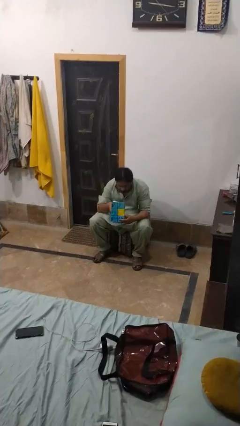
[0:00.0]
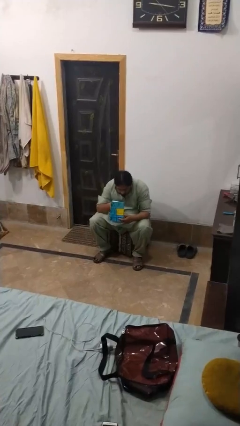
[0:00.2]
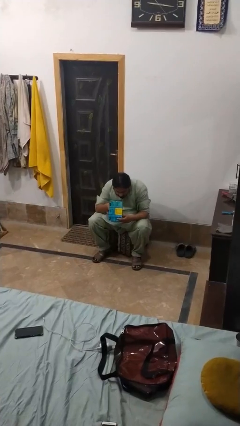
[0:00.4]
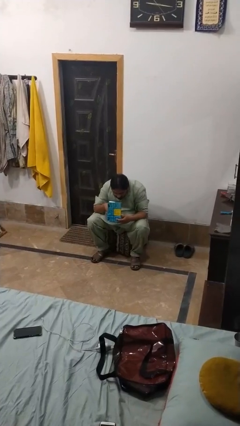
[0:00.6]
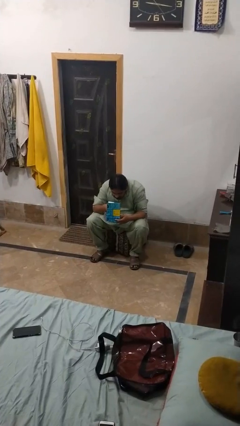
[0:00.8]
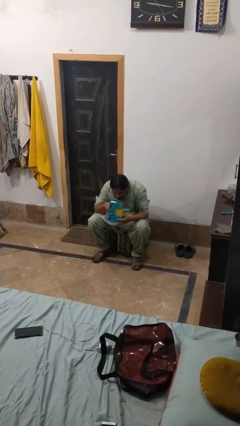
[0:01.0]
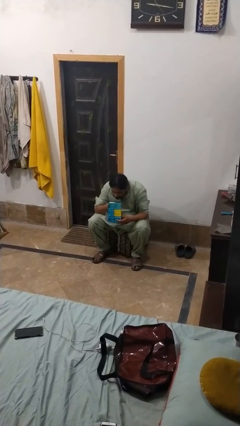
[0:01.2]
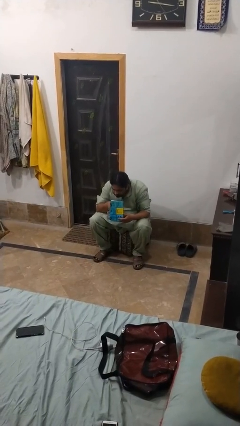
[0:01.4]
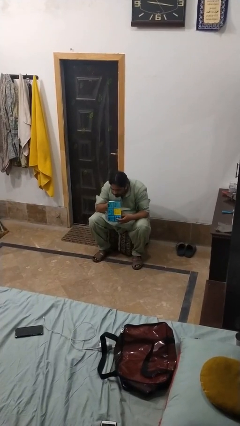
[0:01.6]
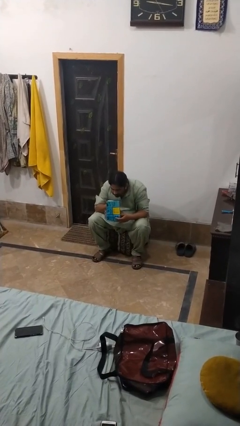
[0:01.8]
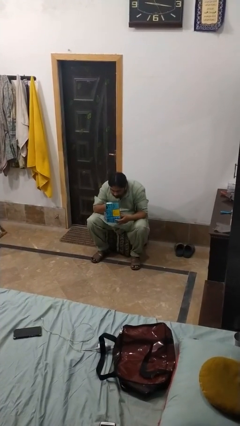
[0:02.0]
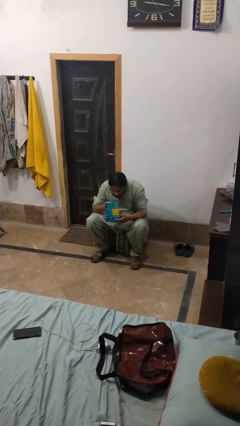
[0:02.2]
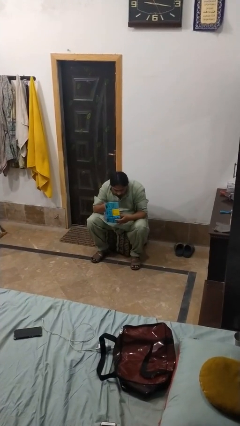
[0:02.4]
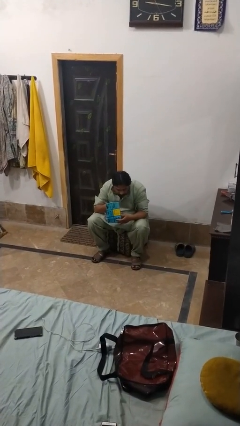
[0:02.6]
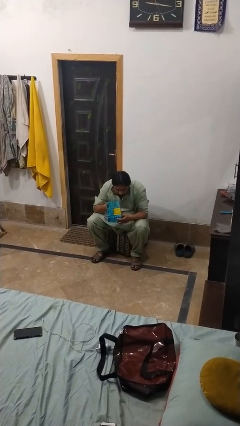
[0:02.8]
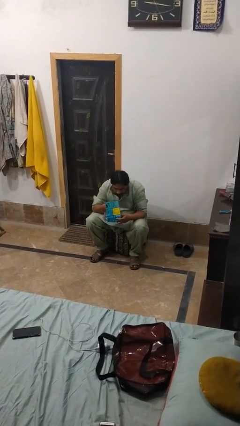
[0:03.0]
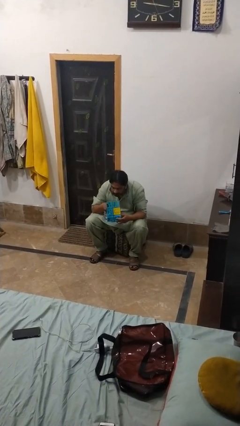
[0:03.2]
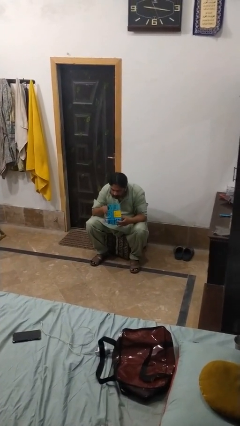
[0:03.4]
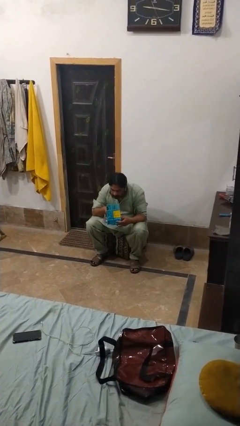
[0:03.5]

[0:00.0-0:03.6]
person searches jewelry box

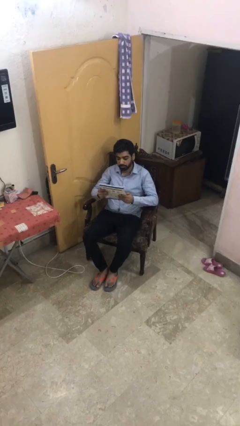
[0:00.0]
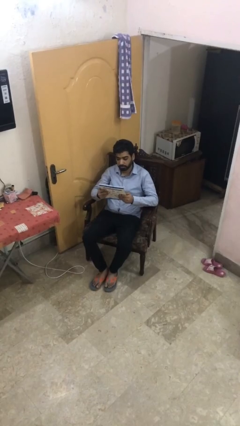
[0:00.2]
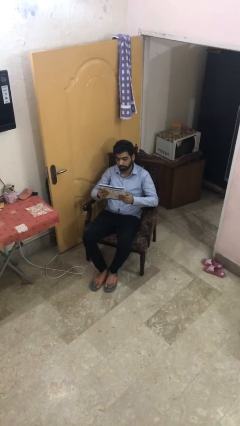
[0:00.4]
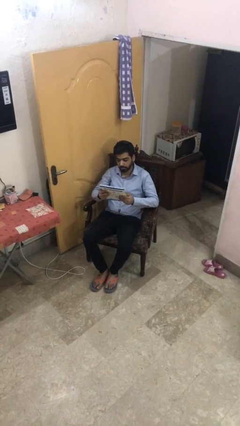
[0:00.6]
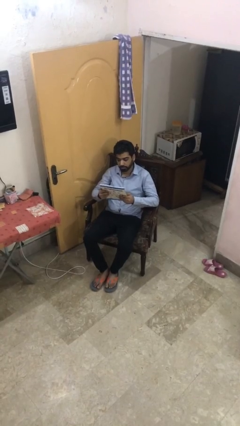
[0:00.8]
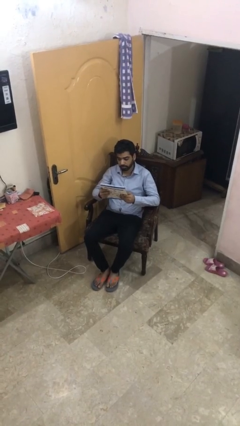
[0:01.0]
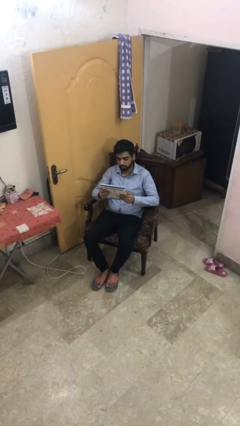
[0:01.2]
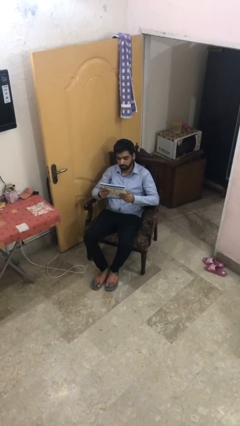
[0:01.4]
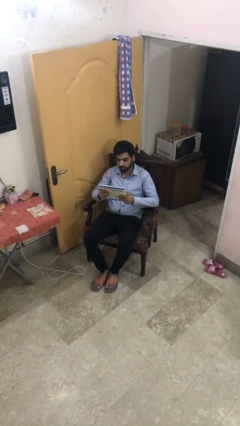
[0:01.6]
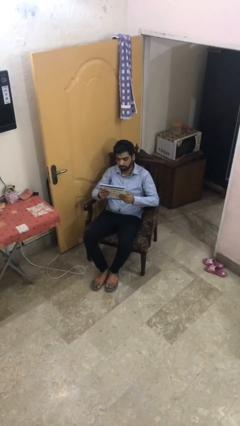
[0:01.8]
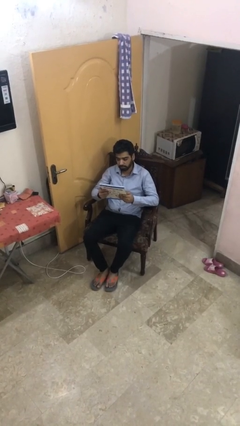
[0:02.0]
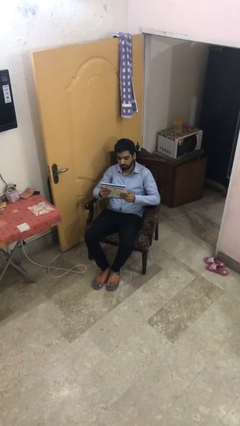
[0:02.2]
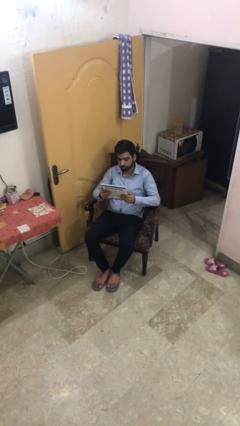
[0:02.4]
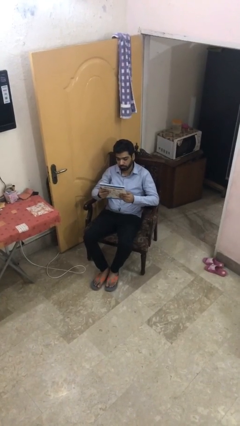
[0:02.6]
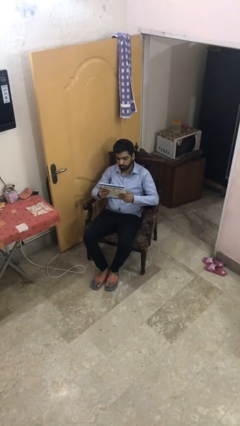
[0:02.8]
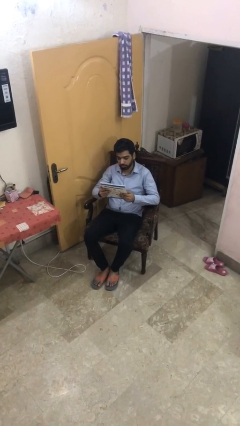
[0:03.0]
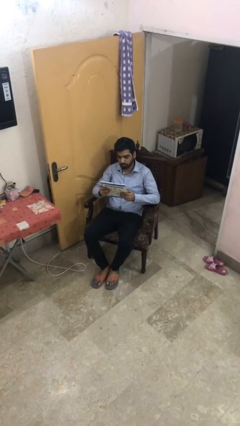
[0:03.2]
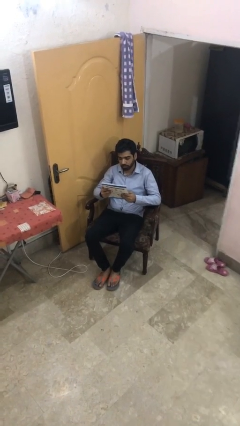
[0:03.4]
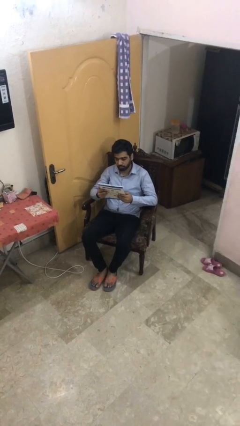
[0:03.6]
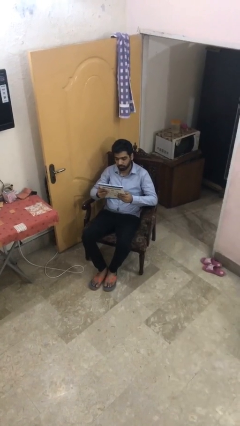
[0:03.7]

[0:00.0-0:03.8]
person reads document

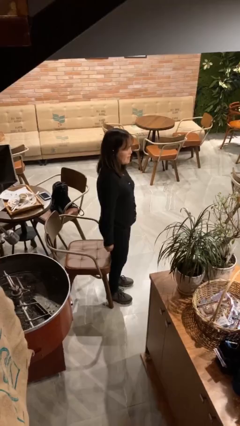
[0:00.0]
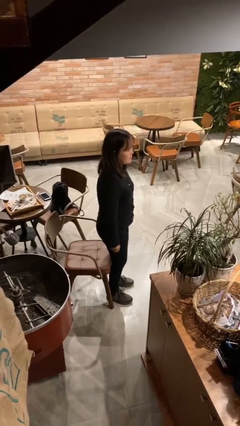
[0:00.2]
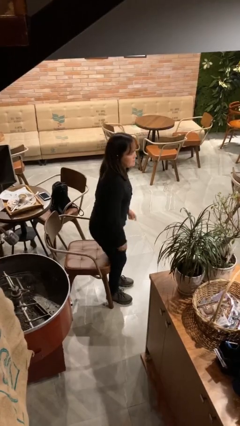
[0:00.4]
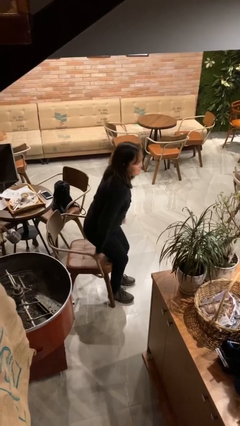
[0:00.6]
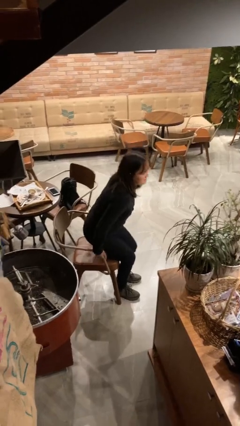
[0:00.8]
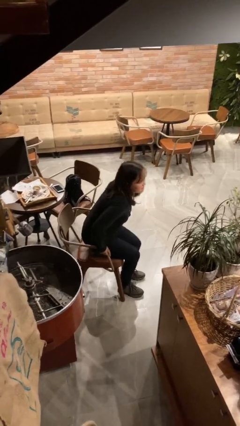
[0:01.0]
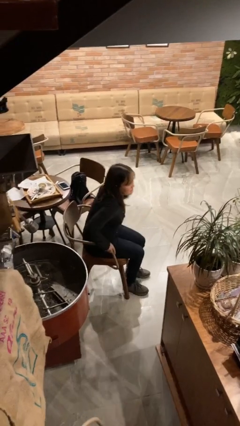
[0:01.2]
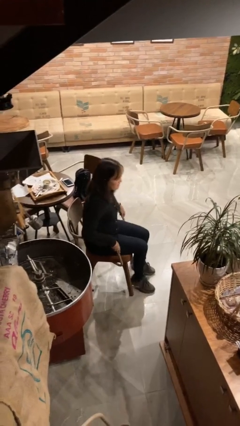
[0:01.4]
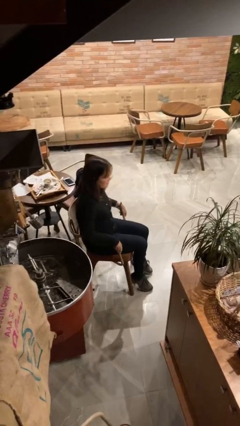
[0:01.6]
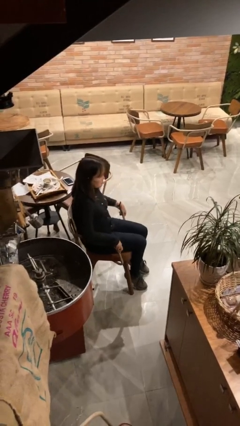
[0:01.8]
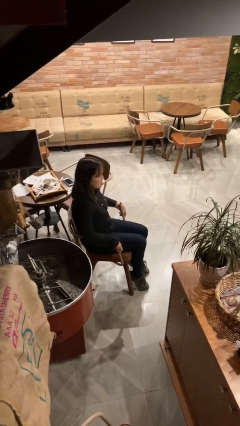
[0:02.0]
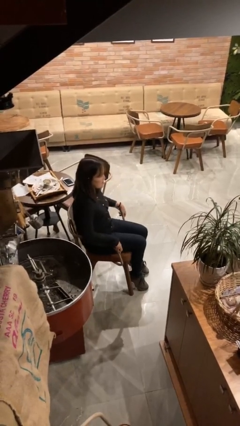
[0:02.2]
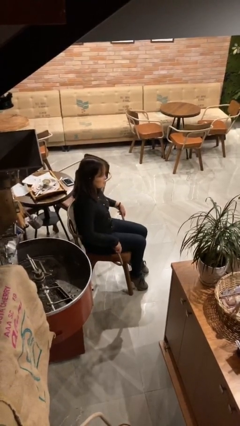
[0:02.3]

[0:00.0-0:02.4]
person sits down

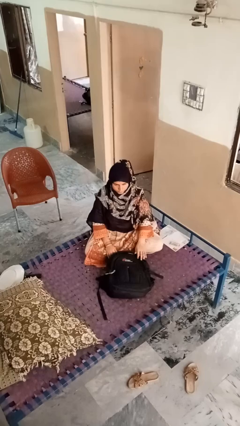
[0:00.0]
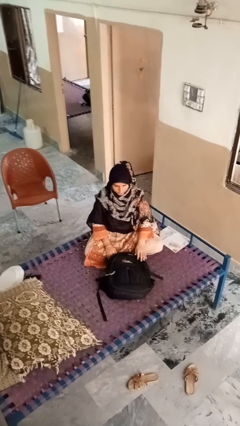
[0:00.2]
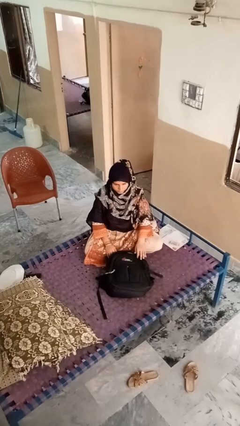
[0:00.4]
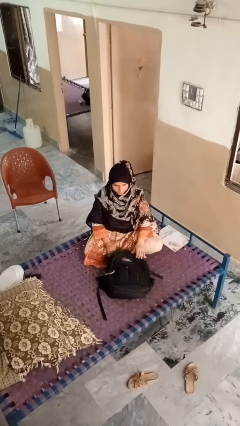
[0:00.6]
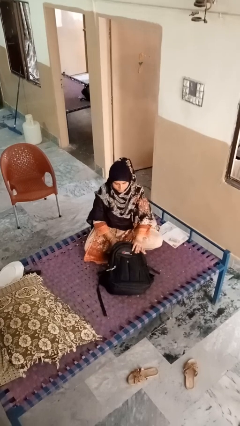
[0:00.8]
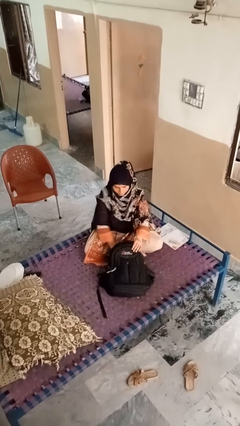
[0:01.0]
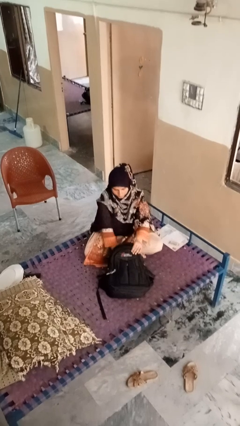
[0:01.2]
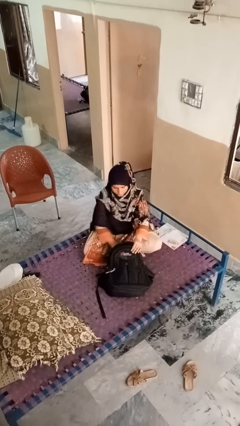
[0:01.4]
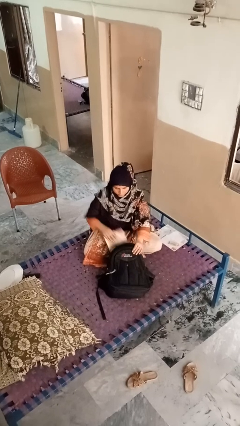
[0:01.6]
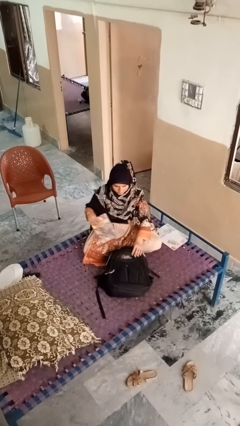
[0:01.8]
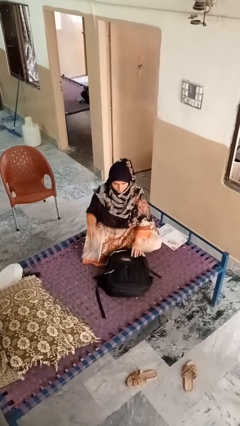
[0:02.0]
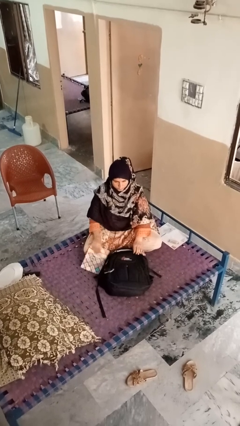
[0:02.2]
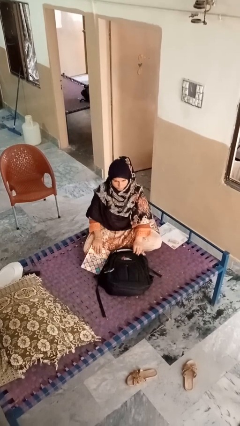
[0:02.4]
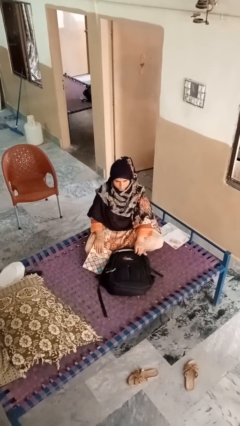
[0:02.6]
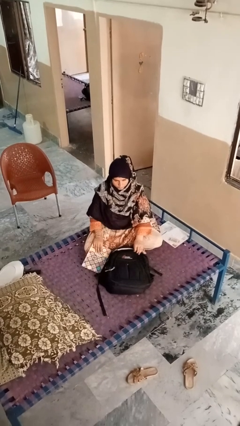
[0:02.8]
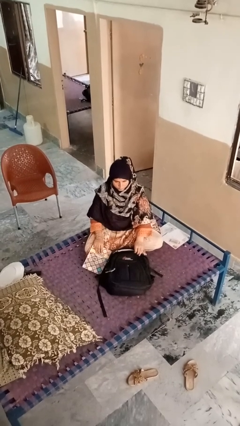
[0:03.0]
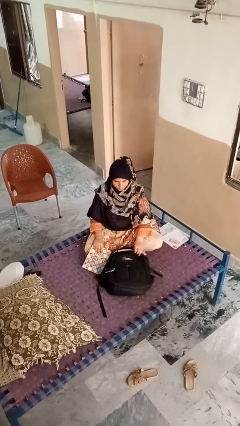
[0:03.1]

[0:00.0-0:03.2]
person takes object from bag

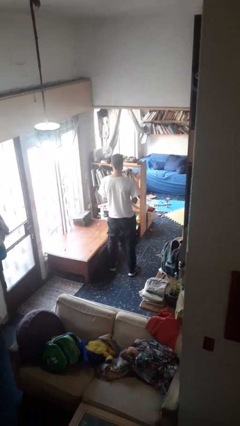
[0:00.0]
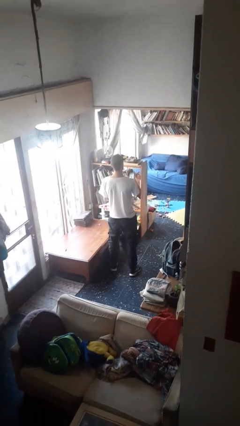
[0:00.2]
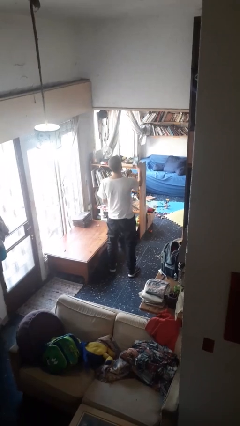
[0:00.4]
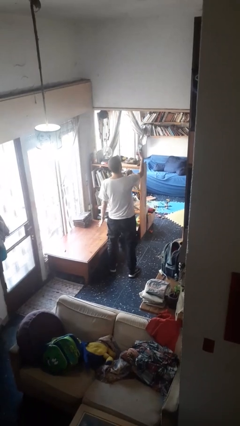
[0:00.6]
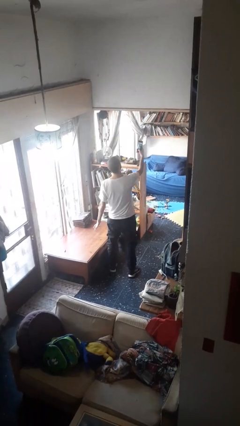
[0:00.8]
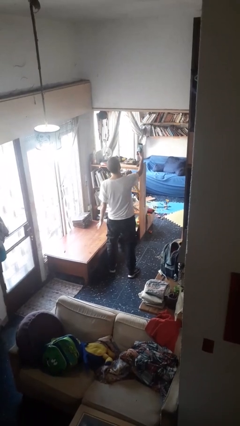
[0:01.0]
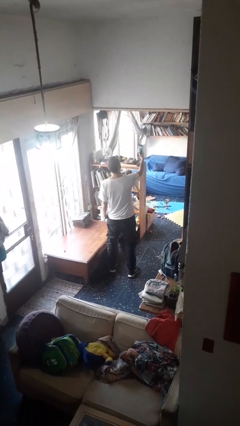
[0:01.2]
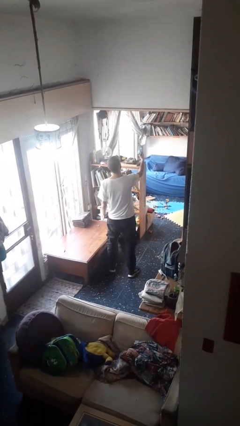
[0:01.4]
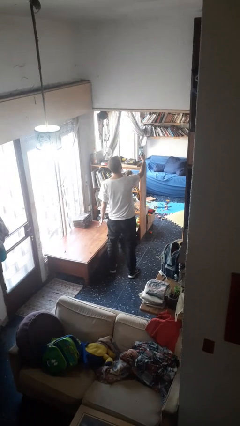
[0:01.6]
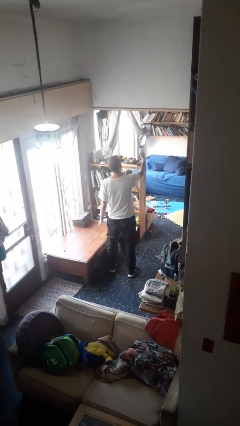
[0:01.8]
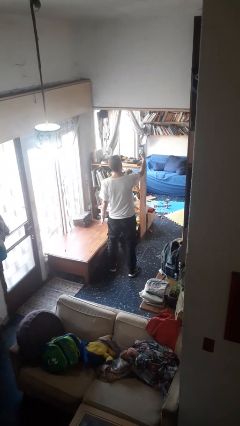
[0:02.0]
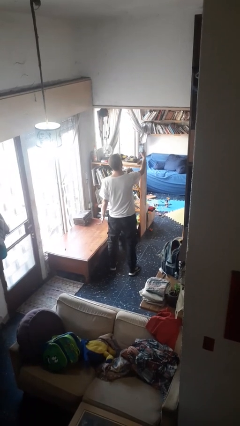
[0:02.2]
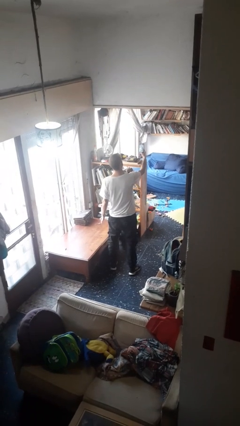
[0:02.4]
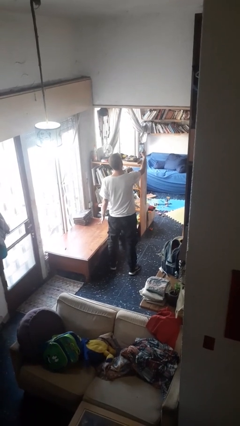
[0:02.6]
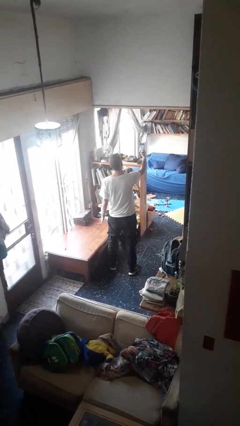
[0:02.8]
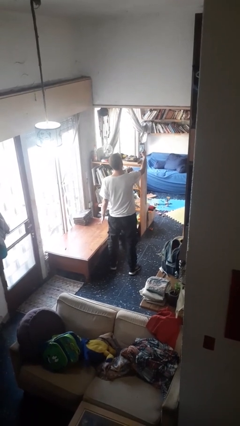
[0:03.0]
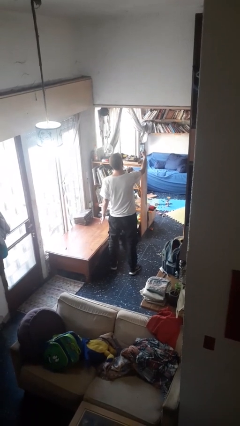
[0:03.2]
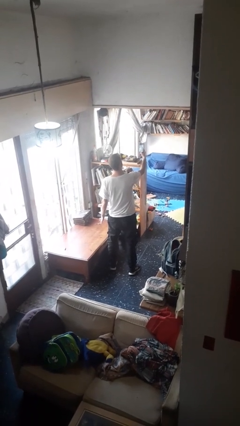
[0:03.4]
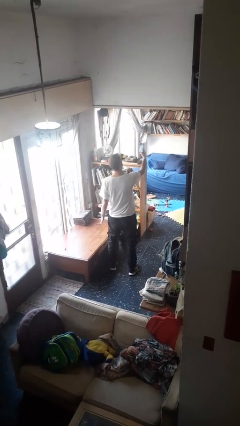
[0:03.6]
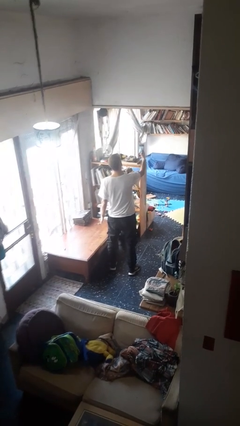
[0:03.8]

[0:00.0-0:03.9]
person takes selfie

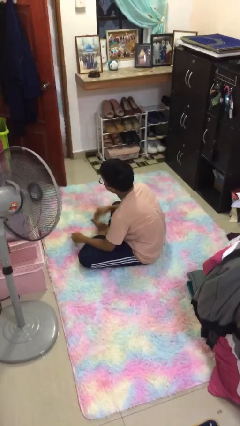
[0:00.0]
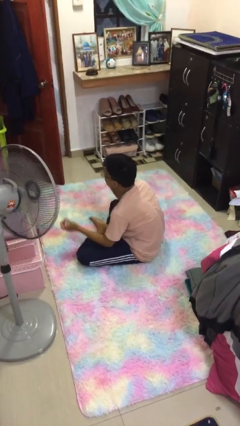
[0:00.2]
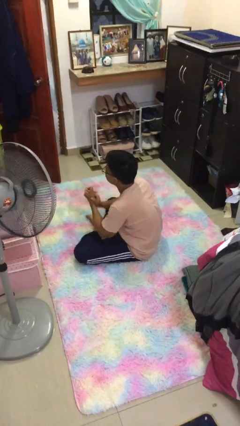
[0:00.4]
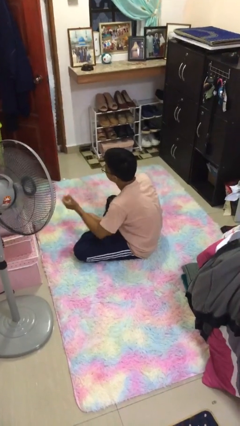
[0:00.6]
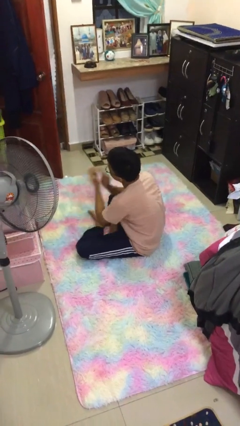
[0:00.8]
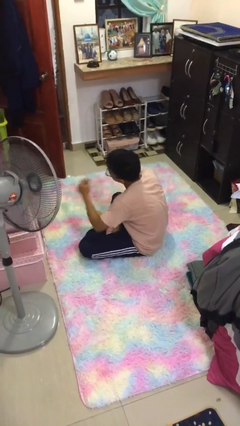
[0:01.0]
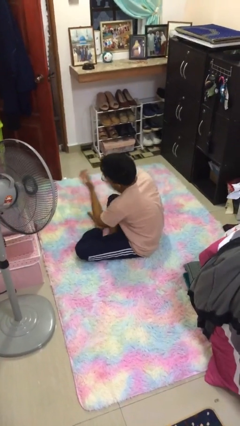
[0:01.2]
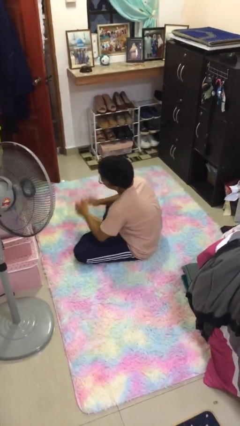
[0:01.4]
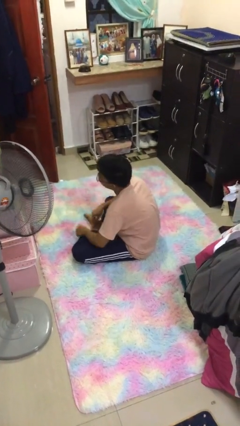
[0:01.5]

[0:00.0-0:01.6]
person claps hands
